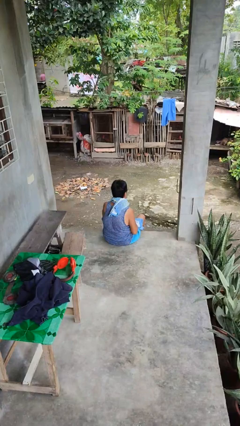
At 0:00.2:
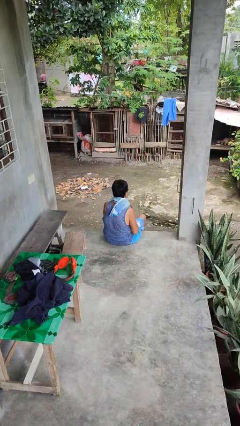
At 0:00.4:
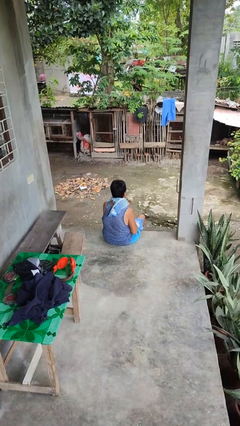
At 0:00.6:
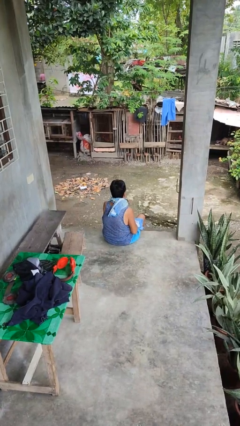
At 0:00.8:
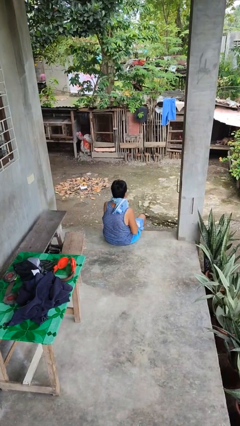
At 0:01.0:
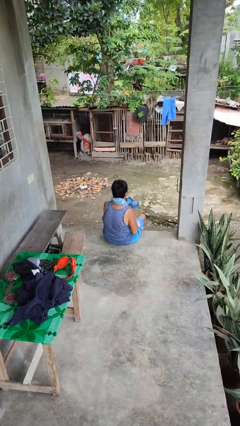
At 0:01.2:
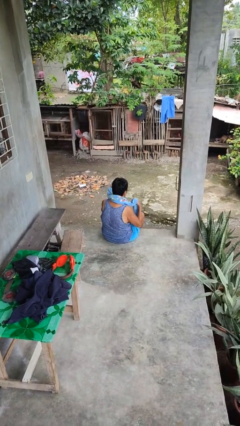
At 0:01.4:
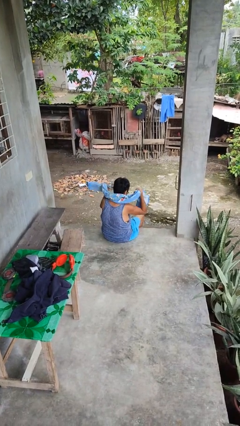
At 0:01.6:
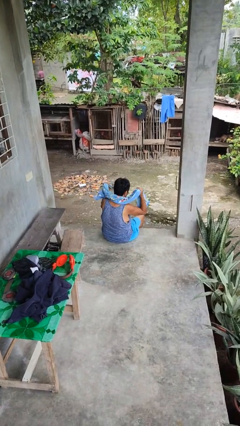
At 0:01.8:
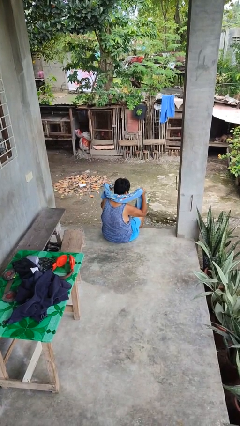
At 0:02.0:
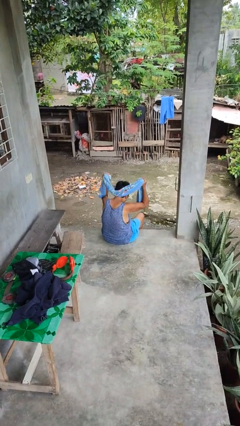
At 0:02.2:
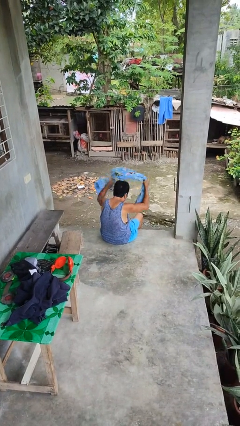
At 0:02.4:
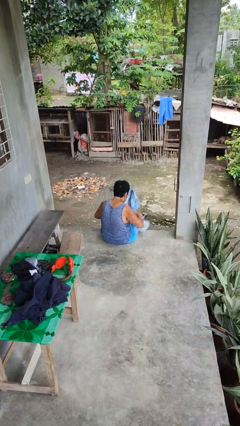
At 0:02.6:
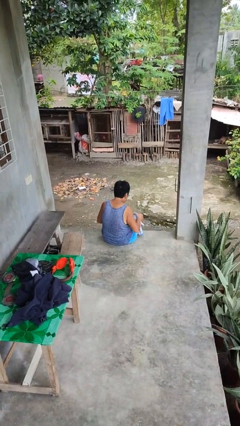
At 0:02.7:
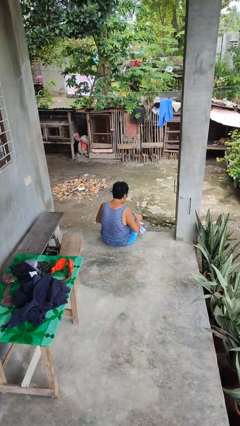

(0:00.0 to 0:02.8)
person takes off scarf

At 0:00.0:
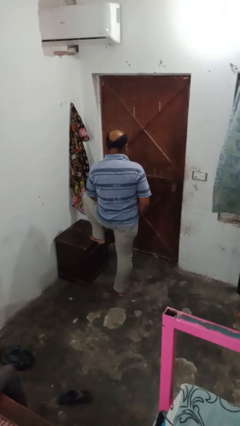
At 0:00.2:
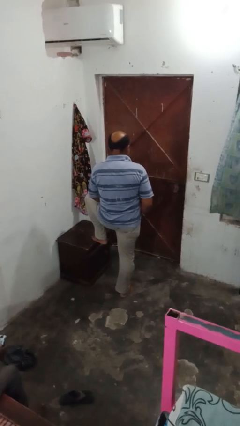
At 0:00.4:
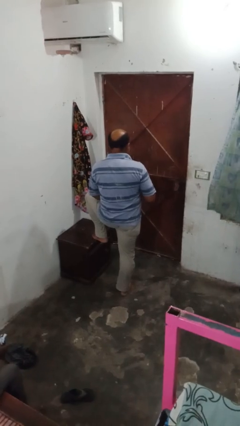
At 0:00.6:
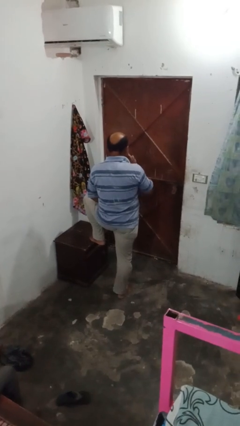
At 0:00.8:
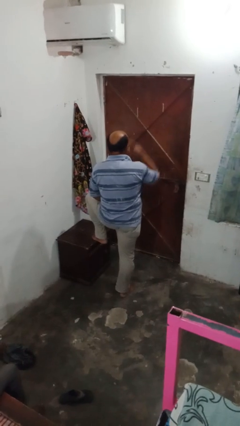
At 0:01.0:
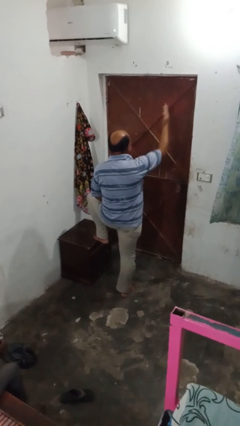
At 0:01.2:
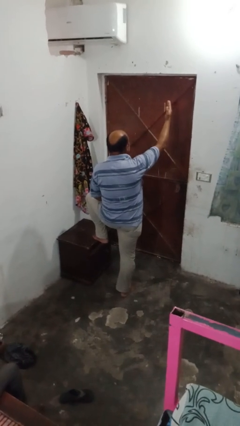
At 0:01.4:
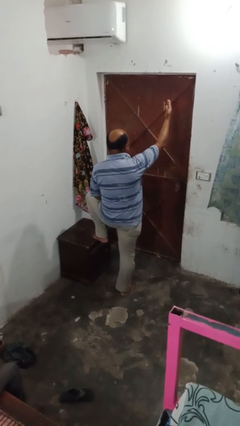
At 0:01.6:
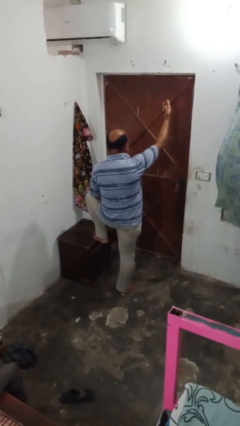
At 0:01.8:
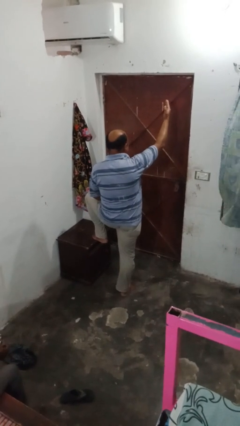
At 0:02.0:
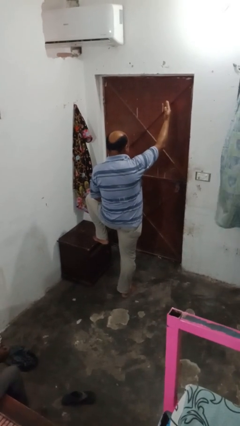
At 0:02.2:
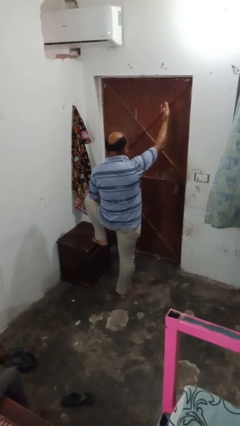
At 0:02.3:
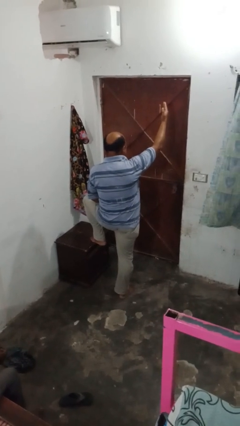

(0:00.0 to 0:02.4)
person gestures blow kiss

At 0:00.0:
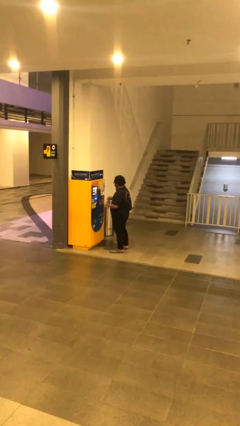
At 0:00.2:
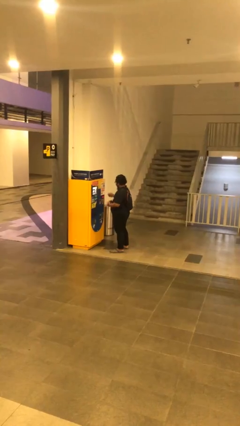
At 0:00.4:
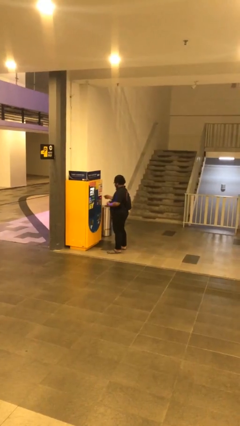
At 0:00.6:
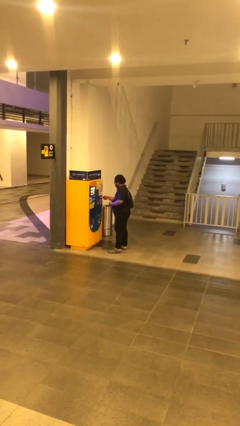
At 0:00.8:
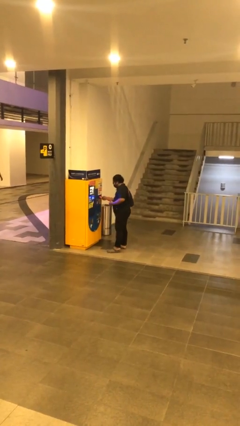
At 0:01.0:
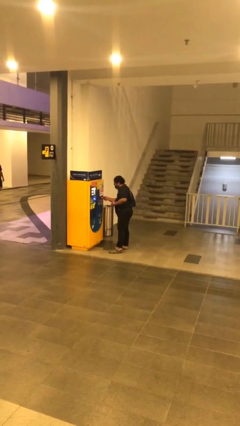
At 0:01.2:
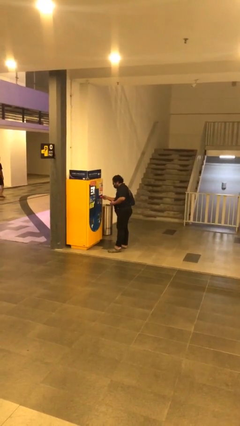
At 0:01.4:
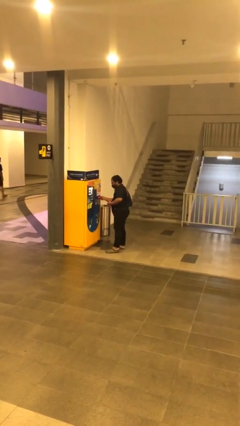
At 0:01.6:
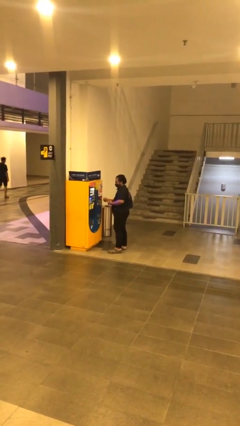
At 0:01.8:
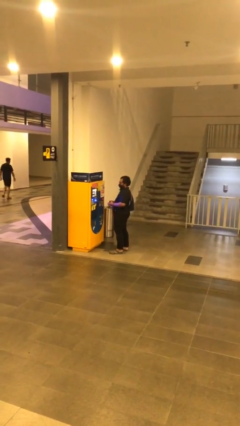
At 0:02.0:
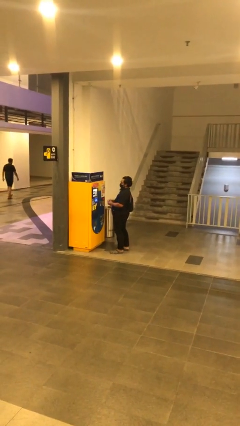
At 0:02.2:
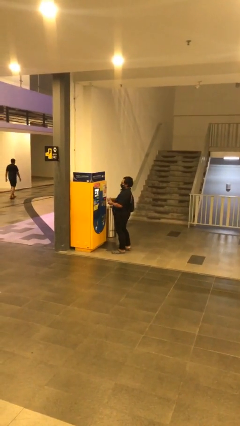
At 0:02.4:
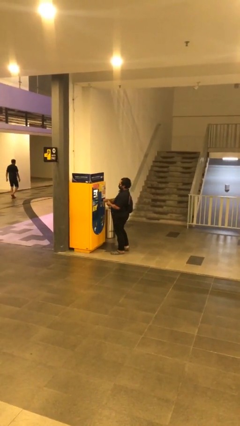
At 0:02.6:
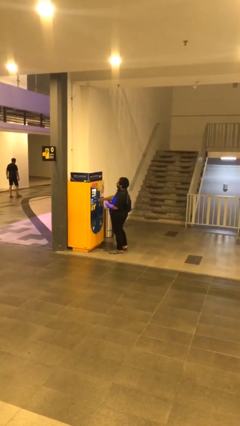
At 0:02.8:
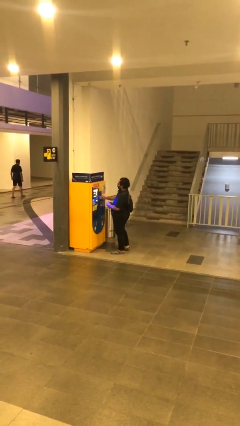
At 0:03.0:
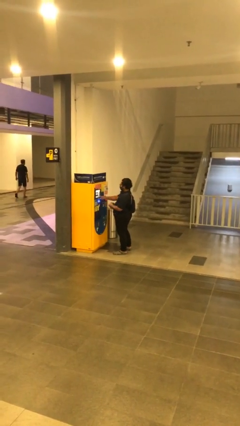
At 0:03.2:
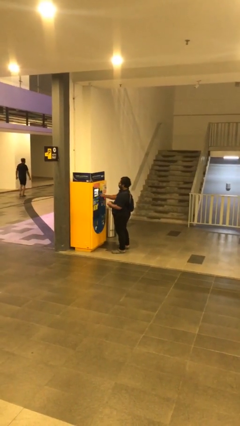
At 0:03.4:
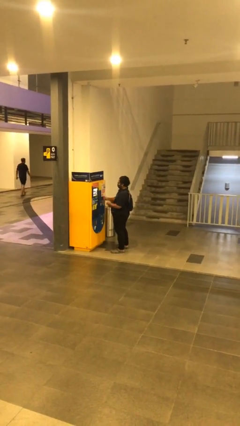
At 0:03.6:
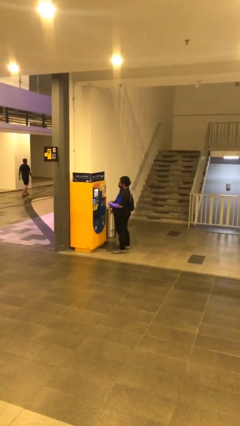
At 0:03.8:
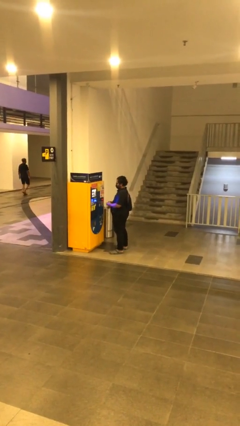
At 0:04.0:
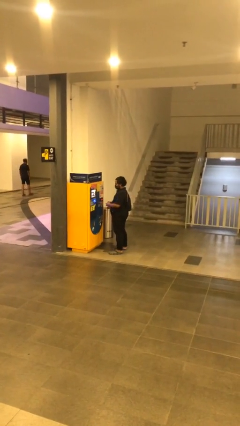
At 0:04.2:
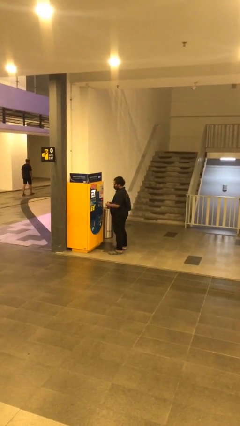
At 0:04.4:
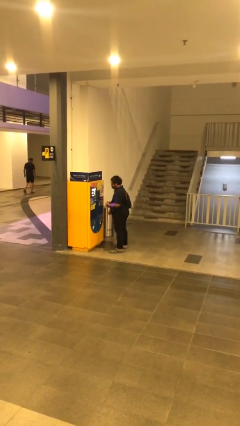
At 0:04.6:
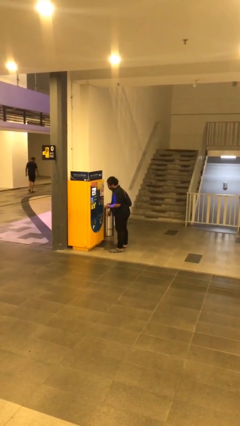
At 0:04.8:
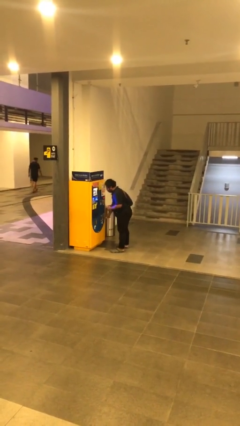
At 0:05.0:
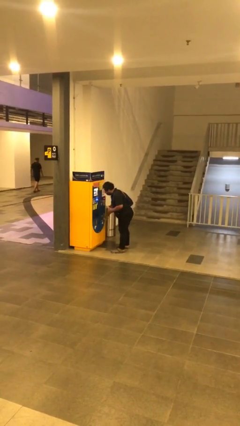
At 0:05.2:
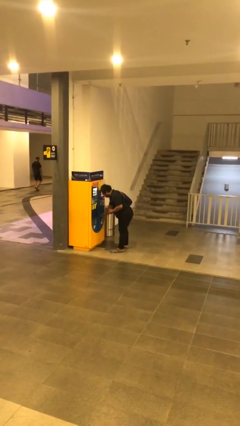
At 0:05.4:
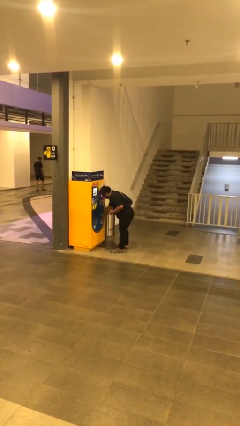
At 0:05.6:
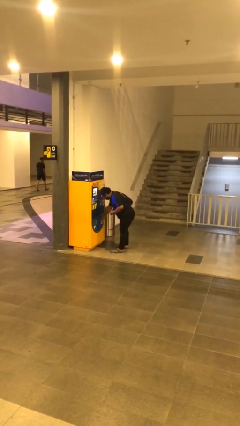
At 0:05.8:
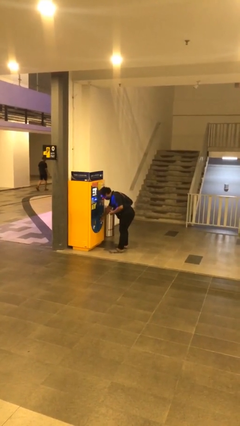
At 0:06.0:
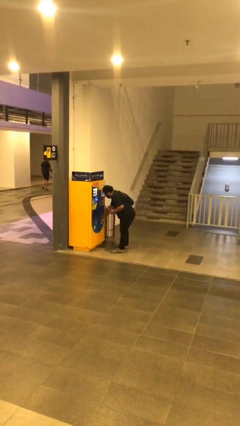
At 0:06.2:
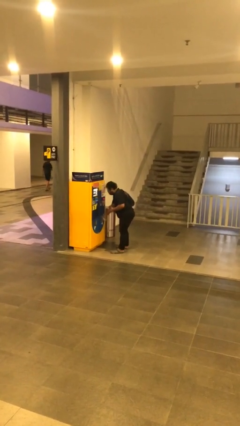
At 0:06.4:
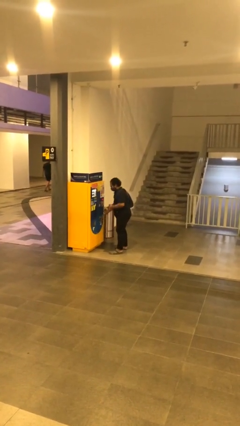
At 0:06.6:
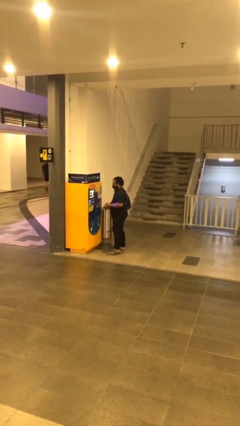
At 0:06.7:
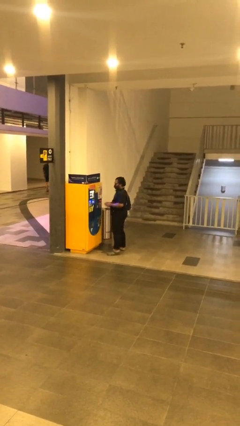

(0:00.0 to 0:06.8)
person purchases from machine

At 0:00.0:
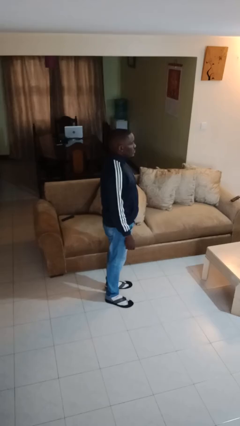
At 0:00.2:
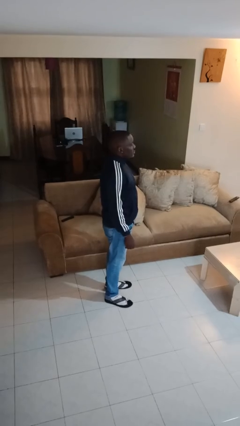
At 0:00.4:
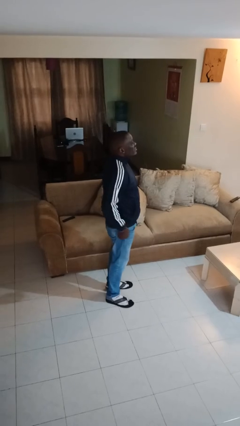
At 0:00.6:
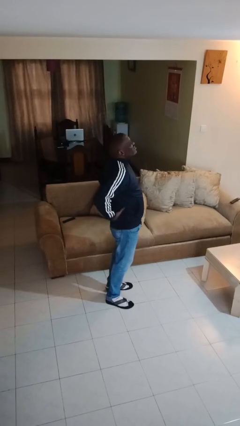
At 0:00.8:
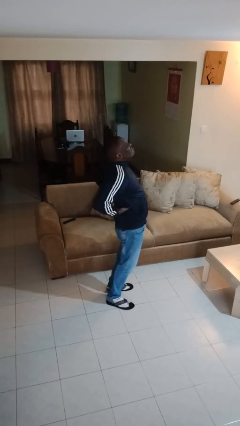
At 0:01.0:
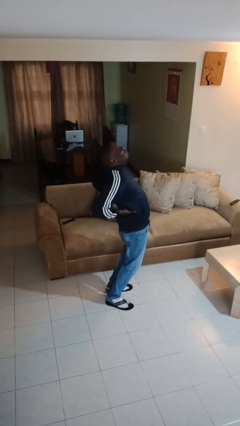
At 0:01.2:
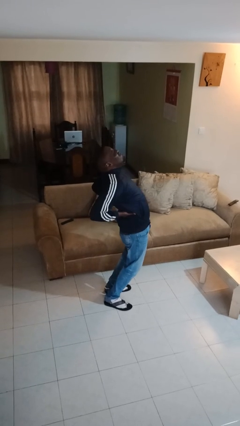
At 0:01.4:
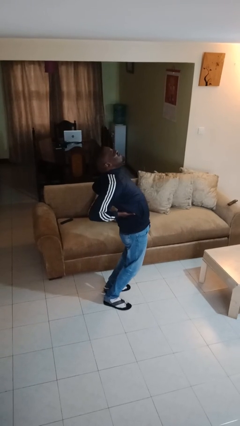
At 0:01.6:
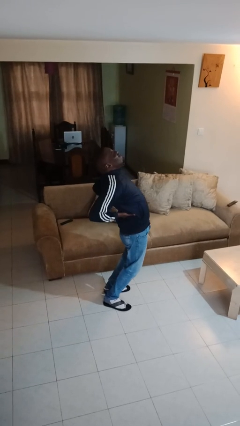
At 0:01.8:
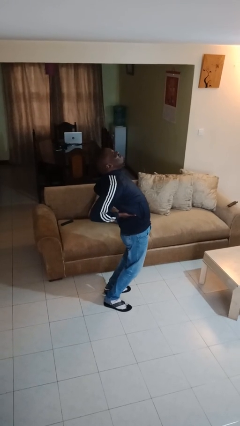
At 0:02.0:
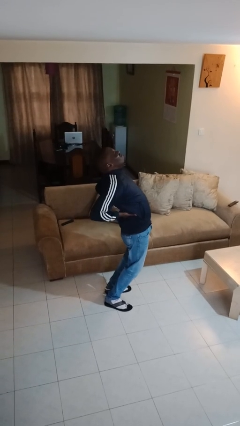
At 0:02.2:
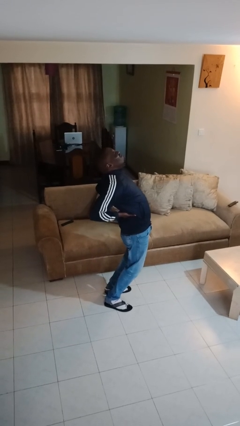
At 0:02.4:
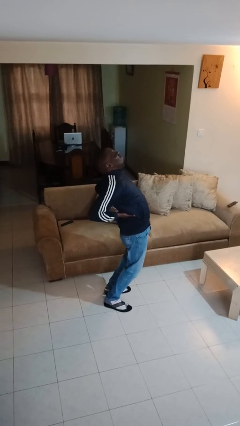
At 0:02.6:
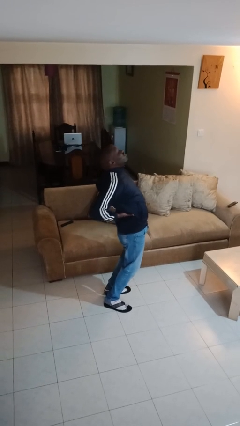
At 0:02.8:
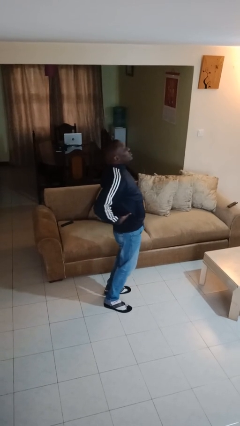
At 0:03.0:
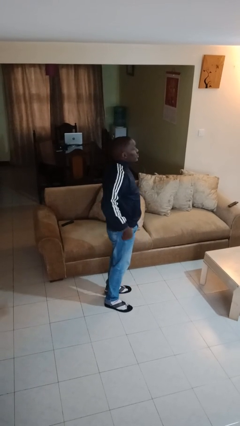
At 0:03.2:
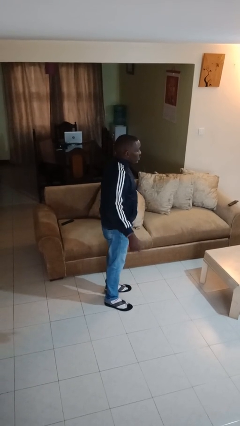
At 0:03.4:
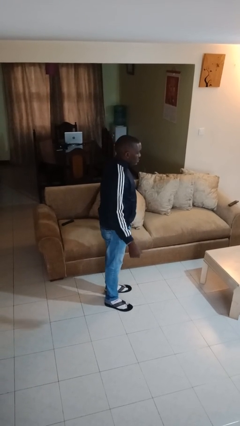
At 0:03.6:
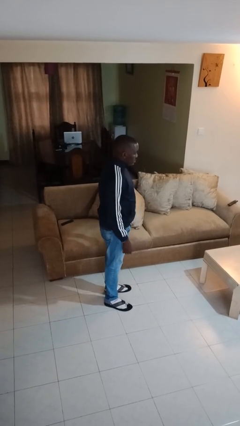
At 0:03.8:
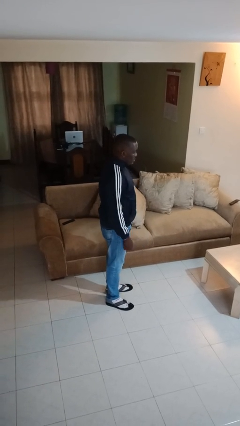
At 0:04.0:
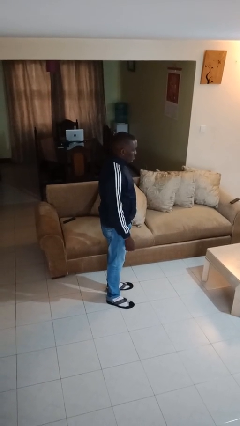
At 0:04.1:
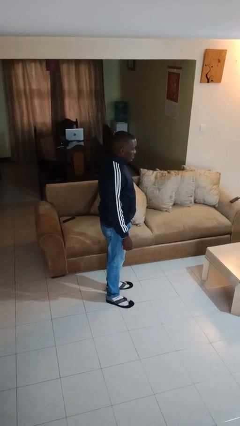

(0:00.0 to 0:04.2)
person stretches back

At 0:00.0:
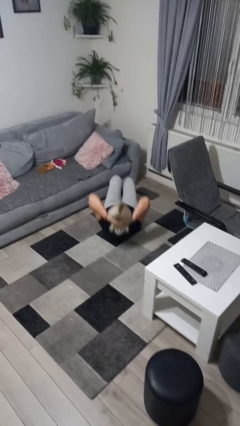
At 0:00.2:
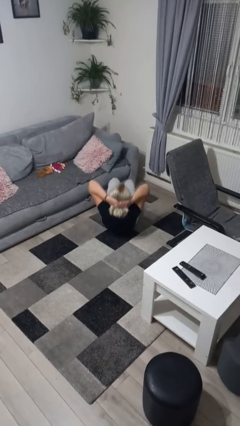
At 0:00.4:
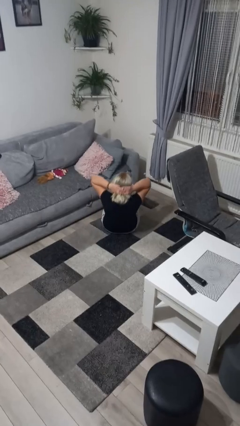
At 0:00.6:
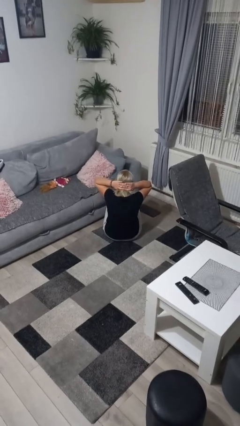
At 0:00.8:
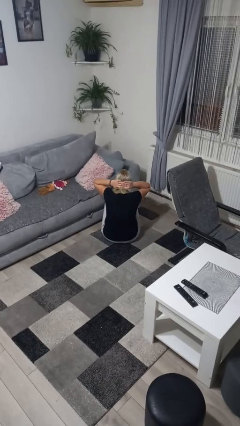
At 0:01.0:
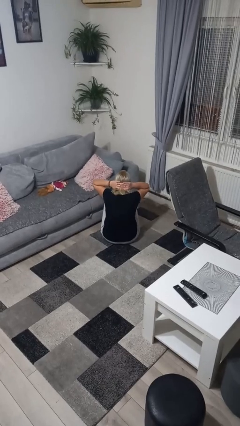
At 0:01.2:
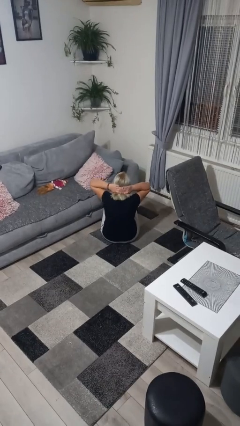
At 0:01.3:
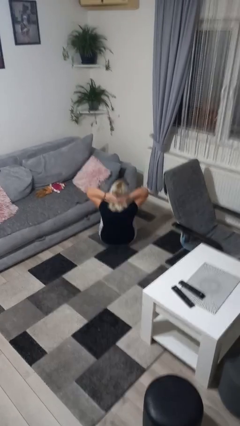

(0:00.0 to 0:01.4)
person exercises with situp
